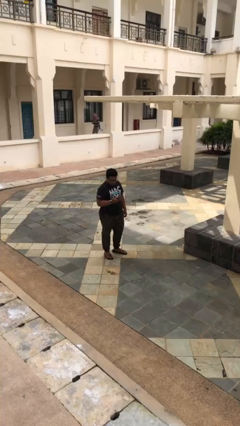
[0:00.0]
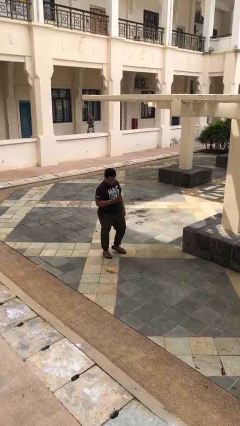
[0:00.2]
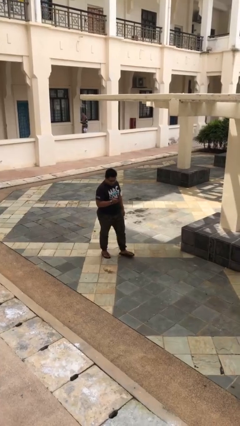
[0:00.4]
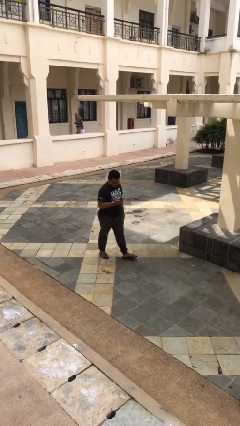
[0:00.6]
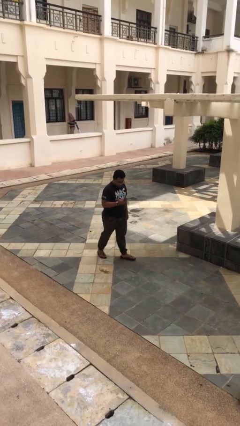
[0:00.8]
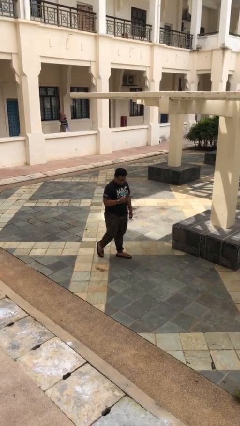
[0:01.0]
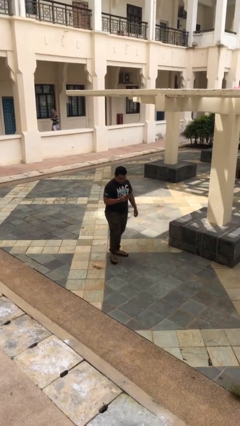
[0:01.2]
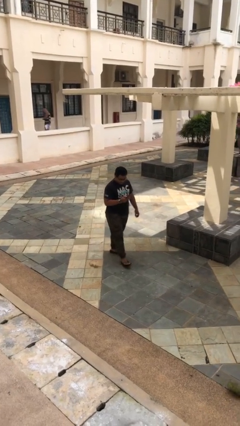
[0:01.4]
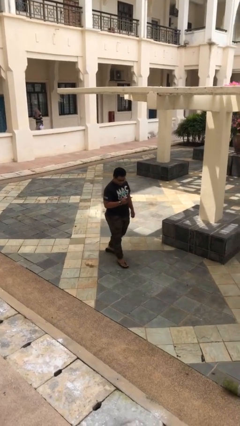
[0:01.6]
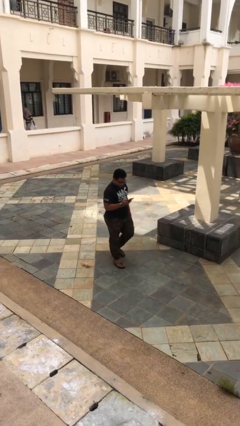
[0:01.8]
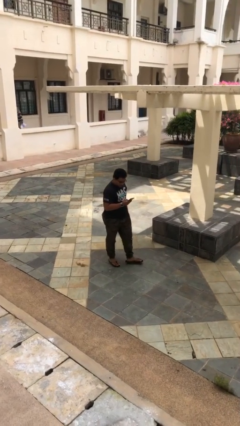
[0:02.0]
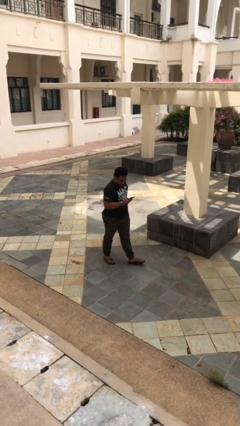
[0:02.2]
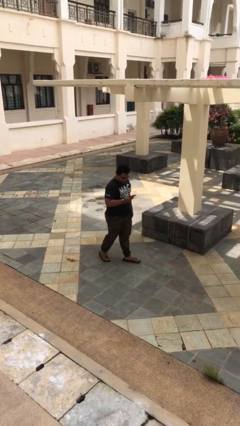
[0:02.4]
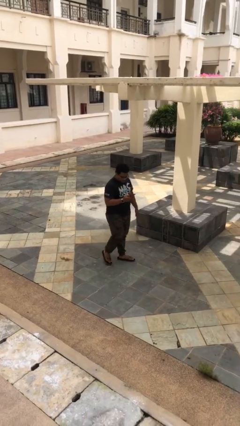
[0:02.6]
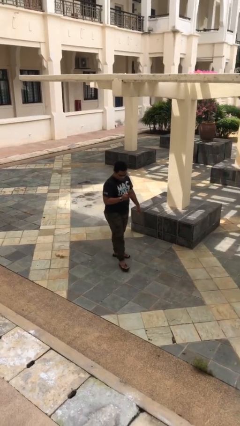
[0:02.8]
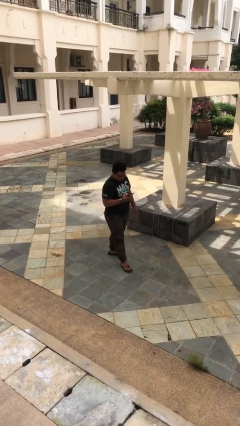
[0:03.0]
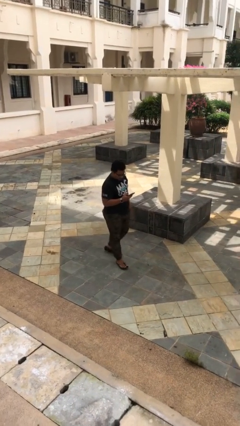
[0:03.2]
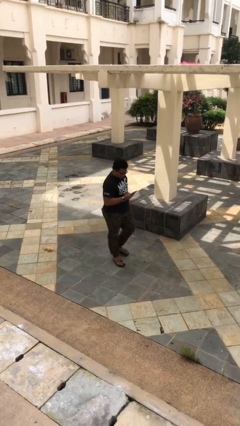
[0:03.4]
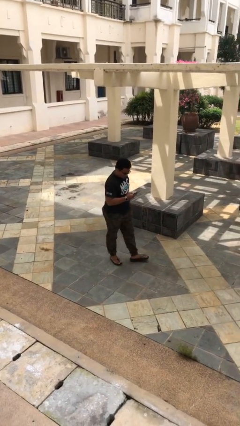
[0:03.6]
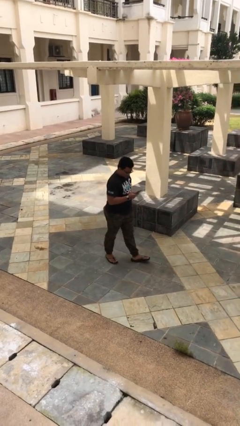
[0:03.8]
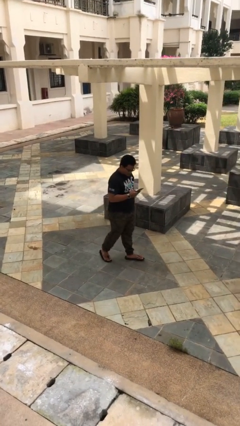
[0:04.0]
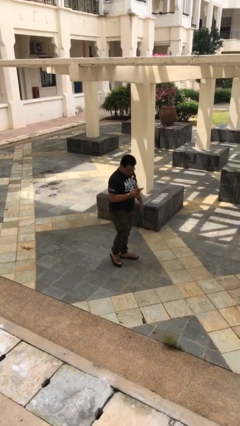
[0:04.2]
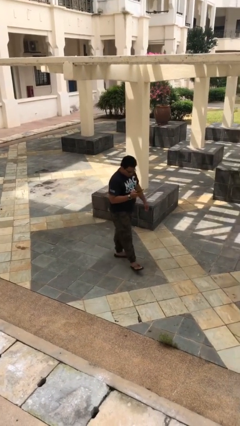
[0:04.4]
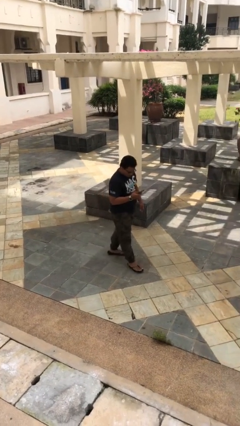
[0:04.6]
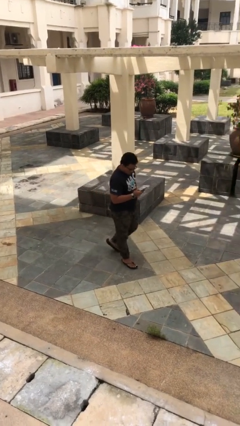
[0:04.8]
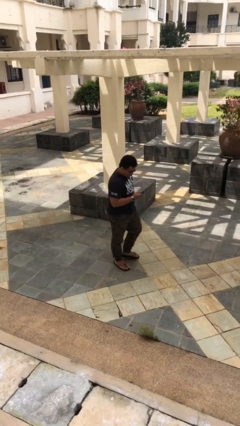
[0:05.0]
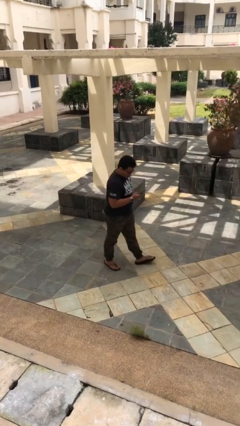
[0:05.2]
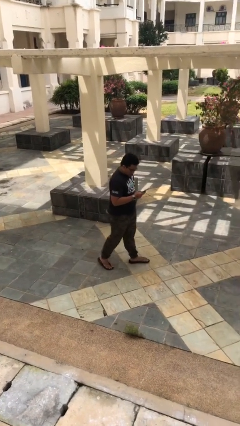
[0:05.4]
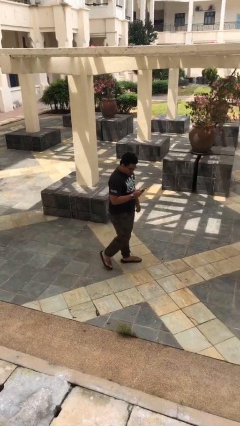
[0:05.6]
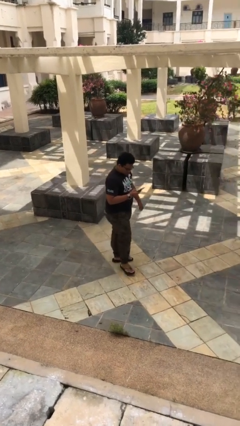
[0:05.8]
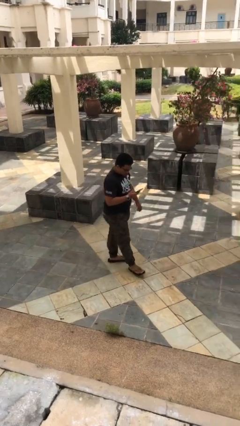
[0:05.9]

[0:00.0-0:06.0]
person texts on phone

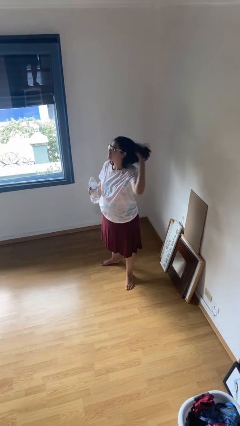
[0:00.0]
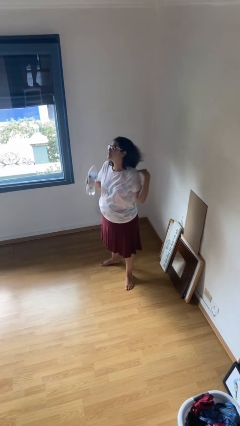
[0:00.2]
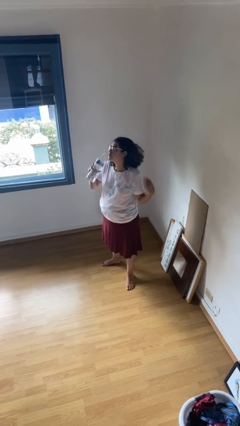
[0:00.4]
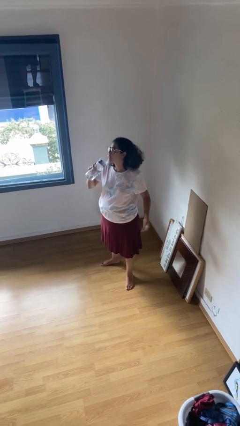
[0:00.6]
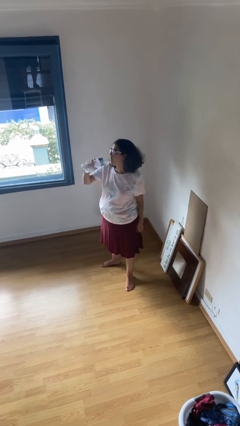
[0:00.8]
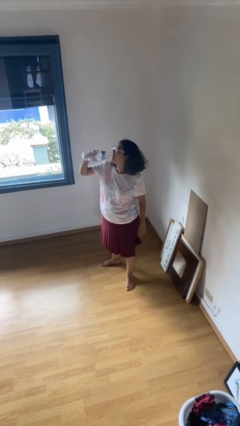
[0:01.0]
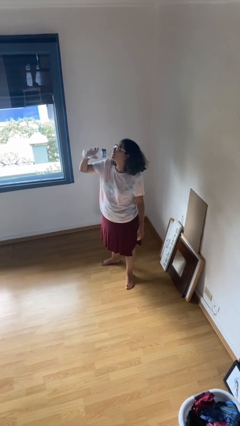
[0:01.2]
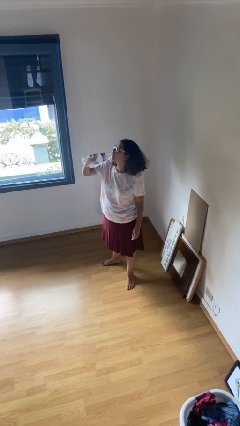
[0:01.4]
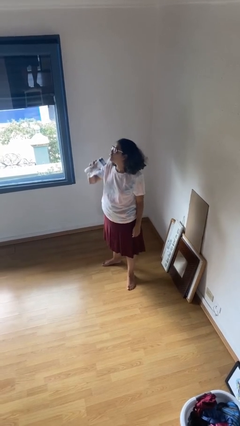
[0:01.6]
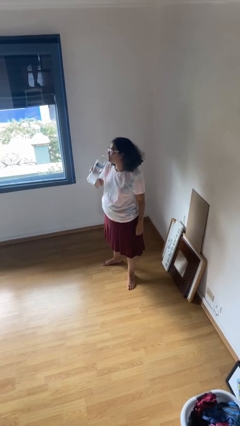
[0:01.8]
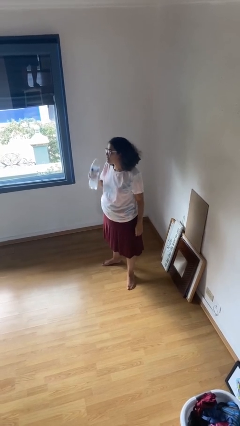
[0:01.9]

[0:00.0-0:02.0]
person drinks from bottle

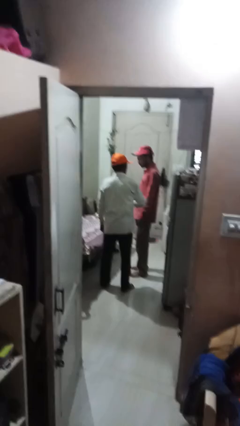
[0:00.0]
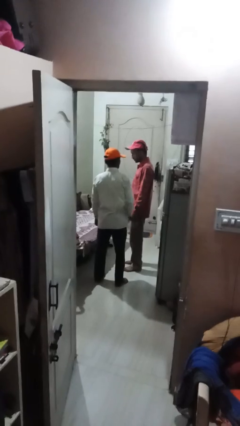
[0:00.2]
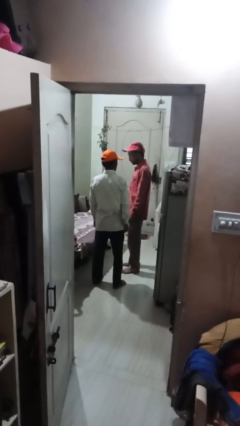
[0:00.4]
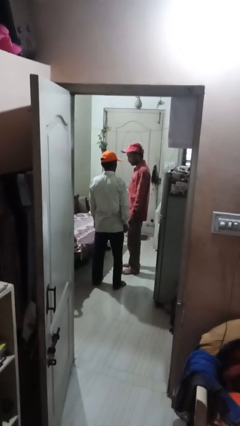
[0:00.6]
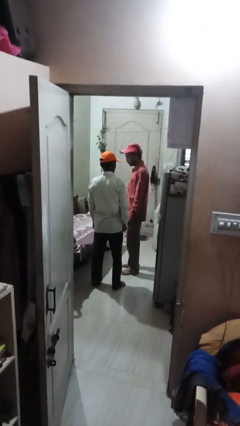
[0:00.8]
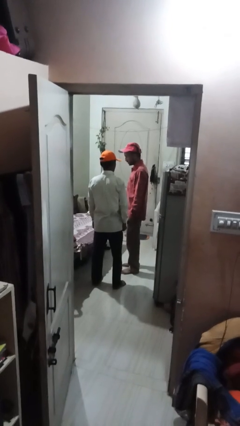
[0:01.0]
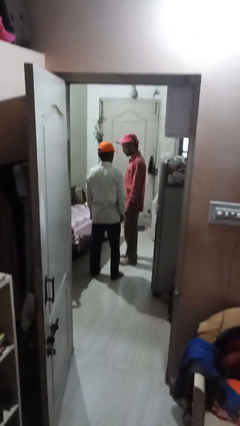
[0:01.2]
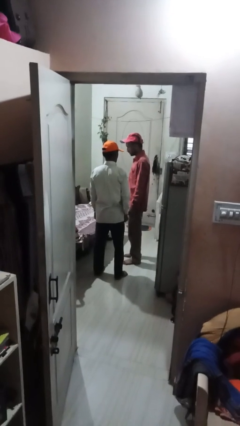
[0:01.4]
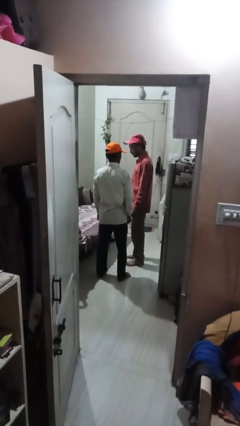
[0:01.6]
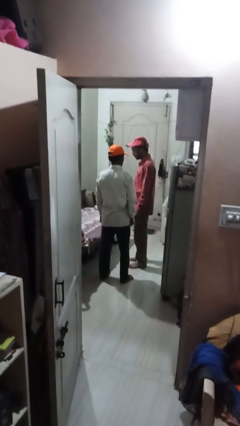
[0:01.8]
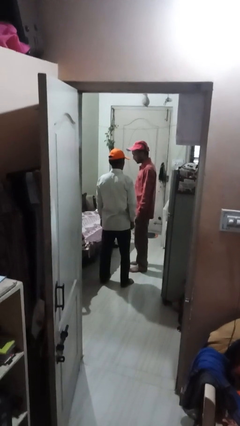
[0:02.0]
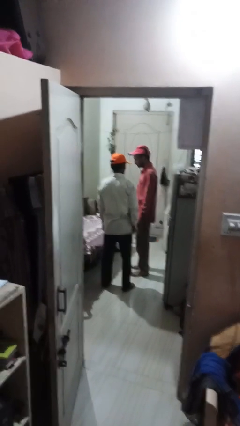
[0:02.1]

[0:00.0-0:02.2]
person nudges person with elbow

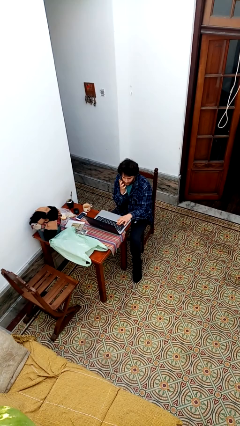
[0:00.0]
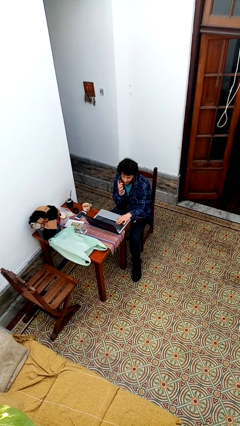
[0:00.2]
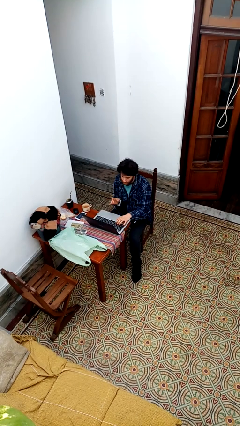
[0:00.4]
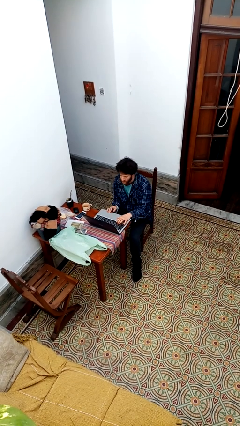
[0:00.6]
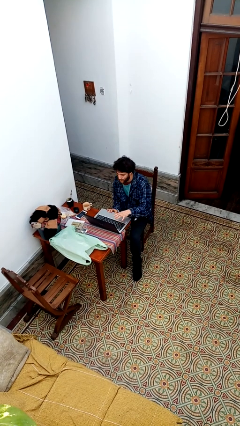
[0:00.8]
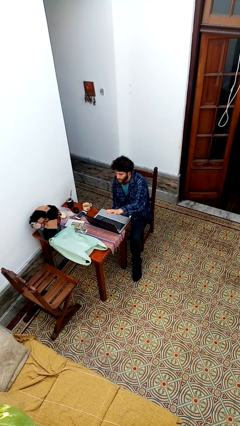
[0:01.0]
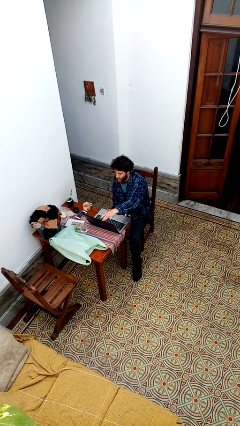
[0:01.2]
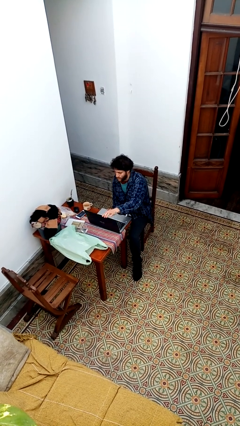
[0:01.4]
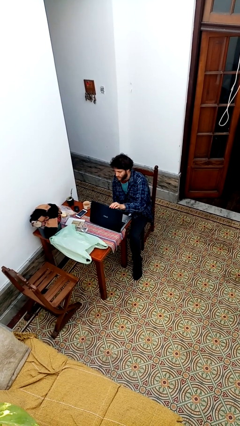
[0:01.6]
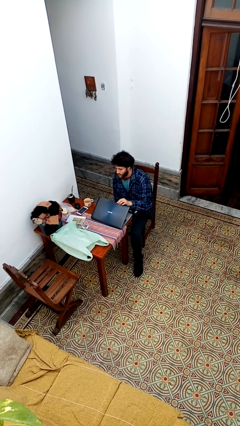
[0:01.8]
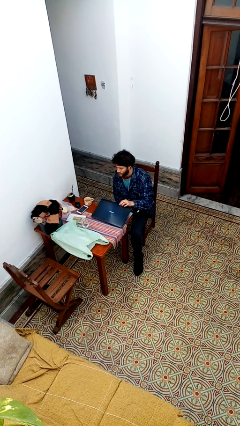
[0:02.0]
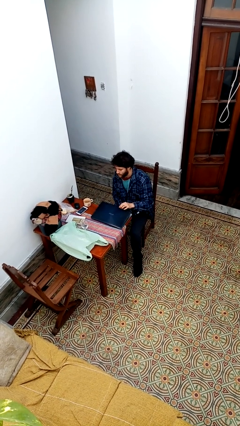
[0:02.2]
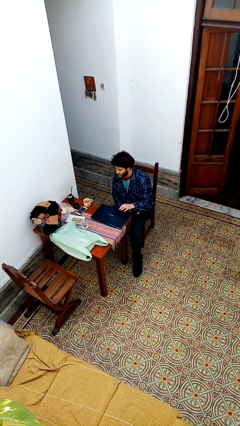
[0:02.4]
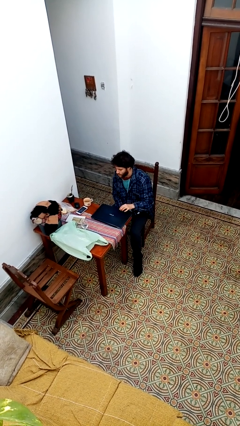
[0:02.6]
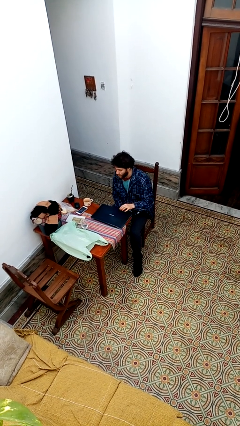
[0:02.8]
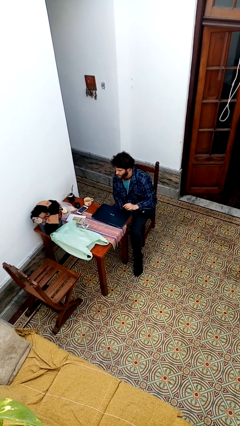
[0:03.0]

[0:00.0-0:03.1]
person closes laptop

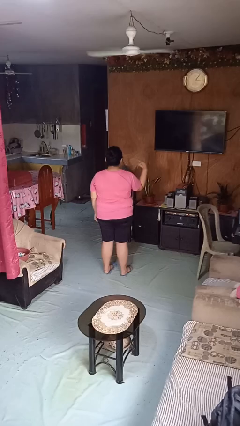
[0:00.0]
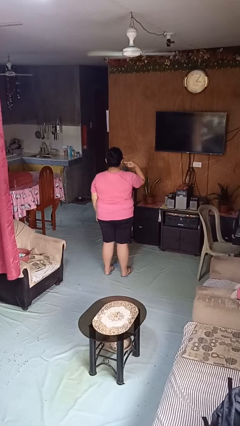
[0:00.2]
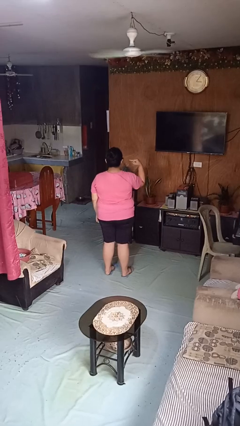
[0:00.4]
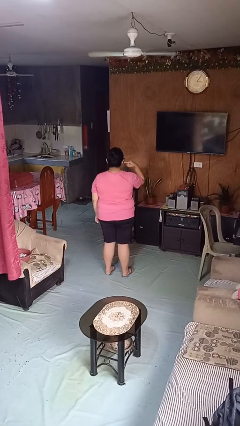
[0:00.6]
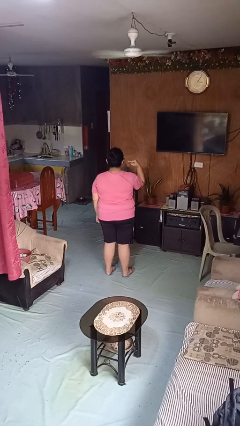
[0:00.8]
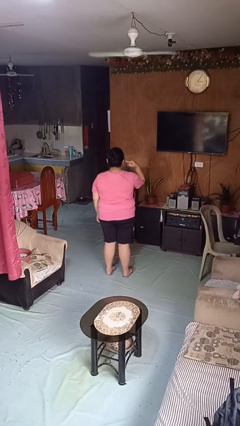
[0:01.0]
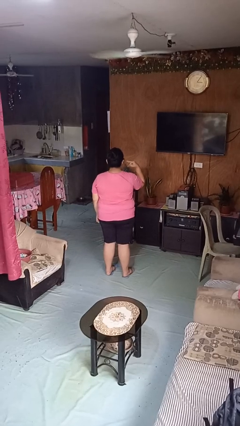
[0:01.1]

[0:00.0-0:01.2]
person gestures listen closely

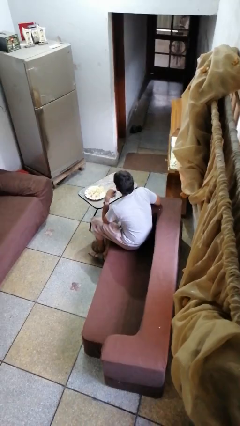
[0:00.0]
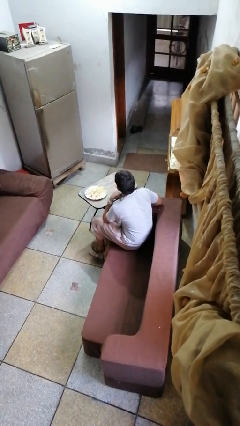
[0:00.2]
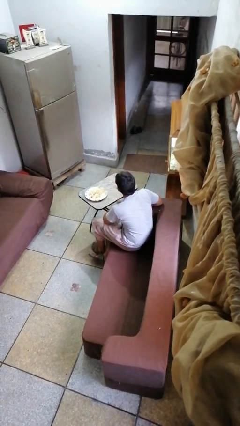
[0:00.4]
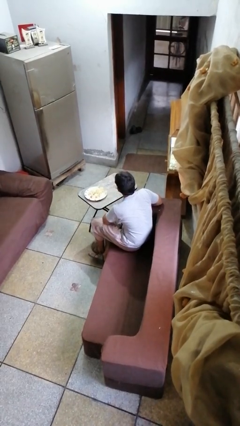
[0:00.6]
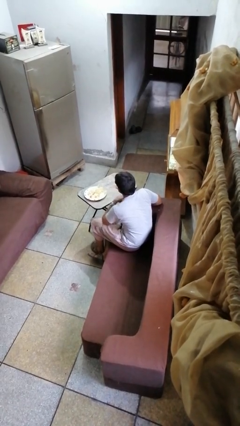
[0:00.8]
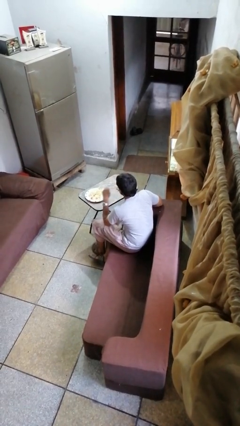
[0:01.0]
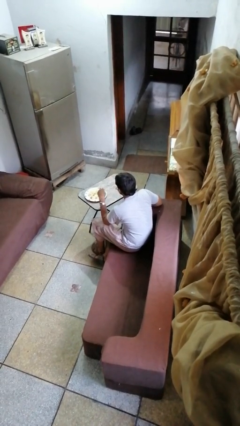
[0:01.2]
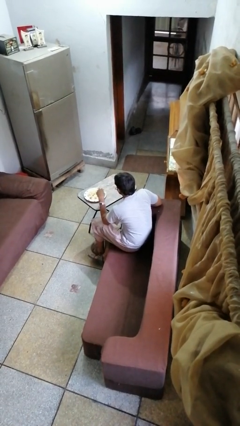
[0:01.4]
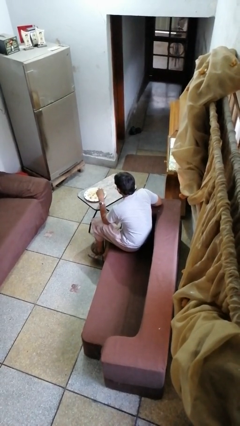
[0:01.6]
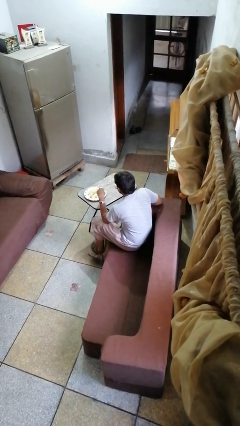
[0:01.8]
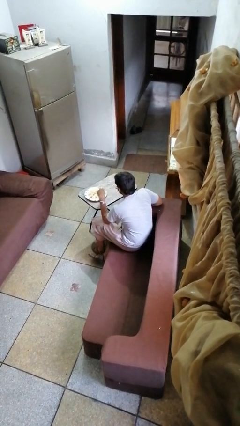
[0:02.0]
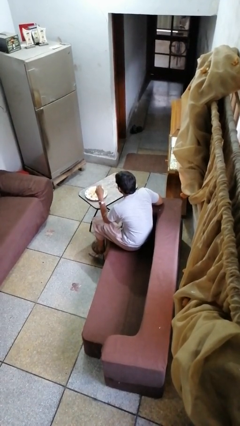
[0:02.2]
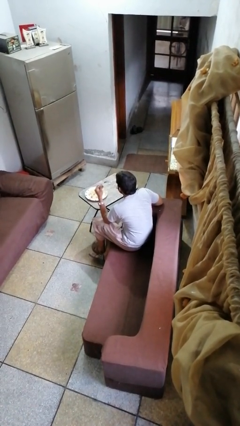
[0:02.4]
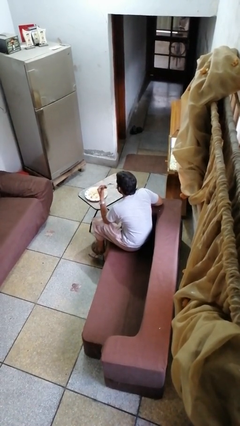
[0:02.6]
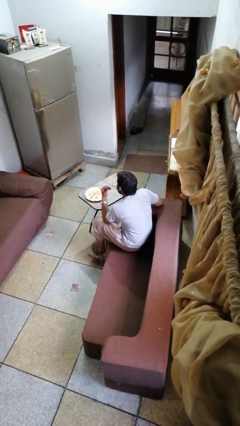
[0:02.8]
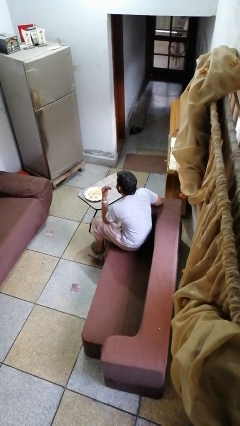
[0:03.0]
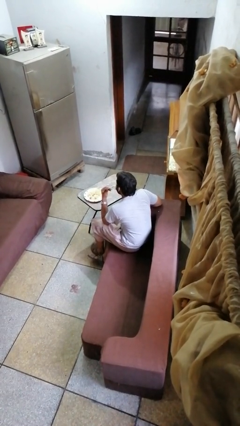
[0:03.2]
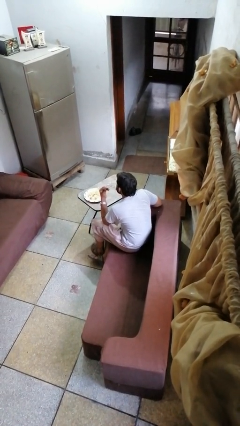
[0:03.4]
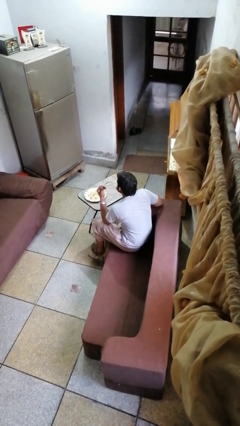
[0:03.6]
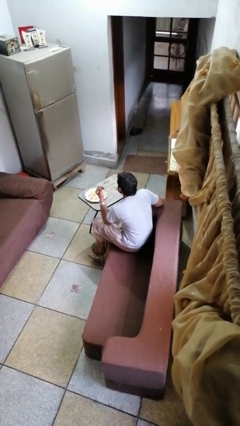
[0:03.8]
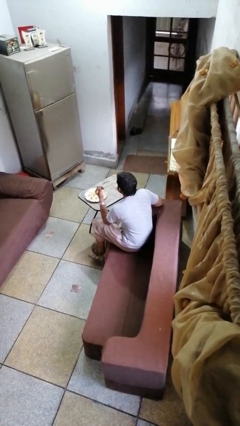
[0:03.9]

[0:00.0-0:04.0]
person eats with utensil
